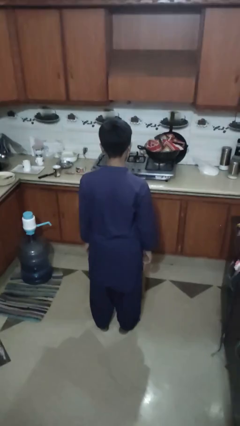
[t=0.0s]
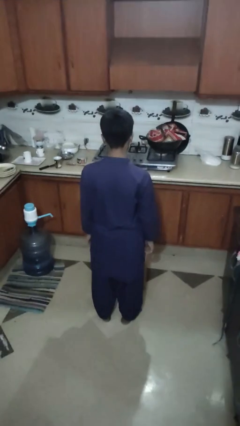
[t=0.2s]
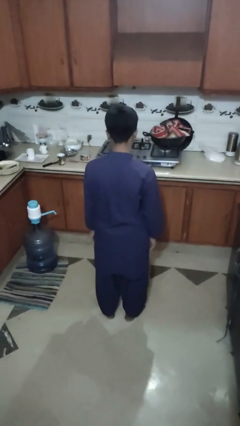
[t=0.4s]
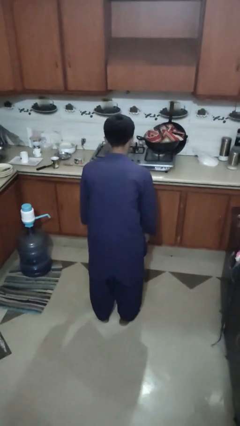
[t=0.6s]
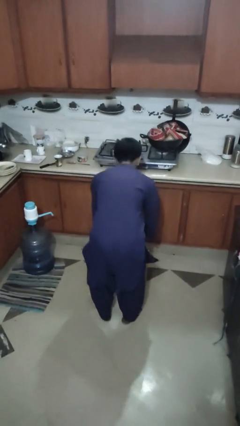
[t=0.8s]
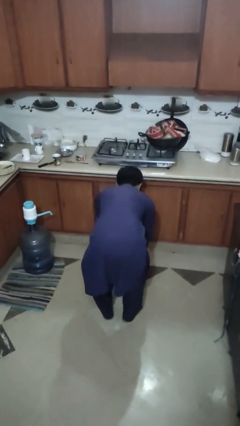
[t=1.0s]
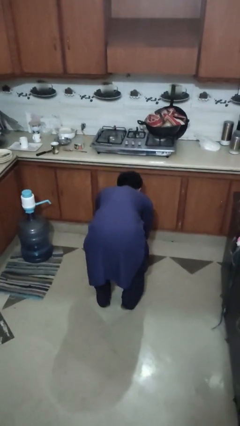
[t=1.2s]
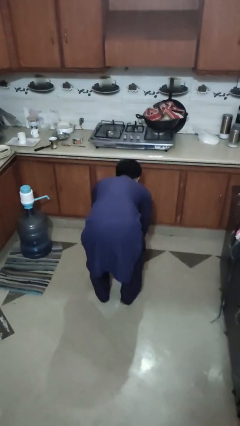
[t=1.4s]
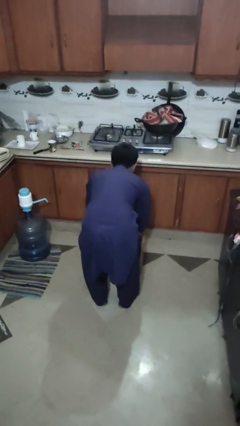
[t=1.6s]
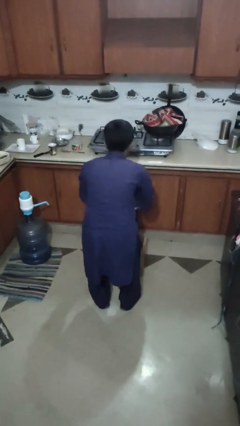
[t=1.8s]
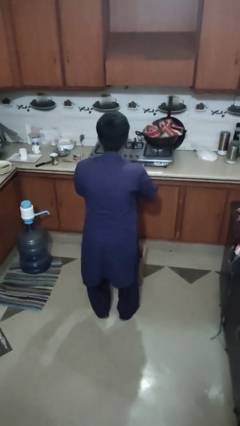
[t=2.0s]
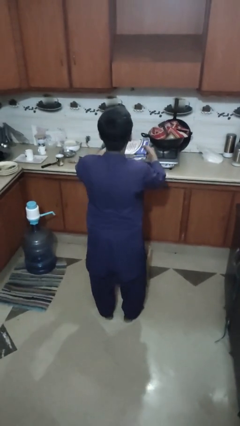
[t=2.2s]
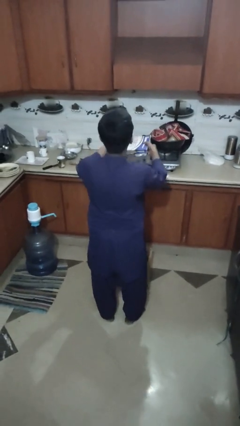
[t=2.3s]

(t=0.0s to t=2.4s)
person takes object from box

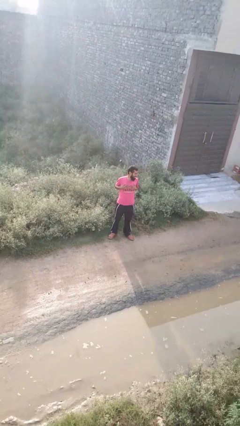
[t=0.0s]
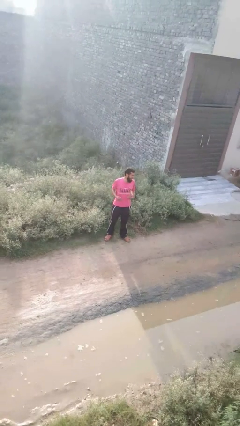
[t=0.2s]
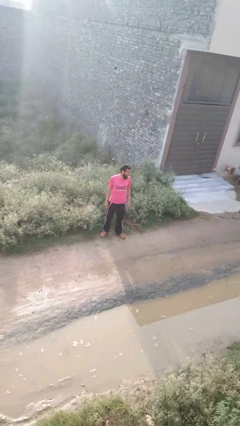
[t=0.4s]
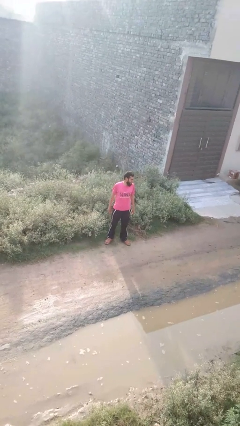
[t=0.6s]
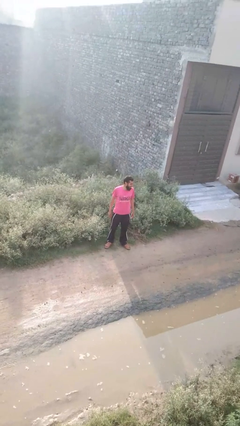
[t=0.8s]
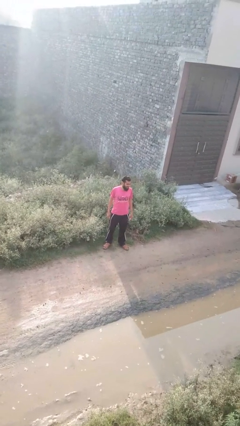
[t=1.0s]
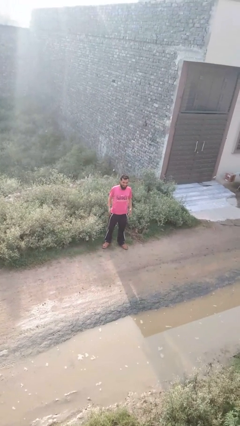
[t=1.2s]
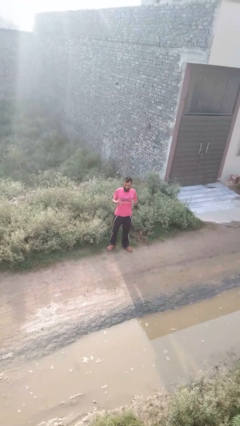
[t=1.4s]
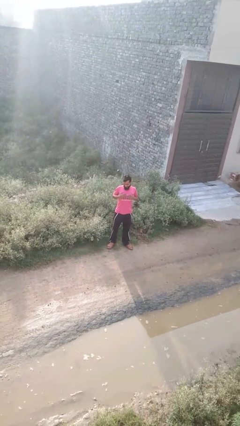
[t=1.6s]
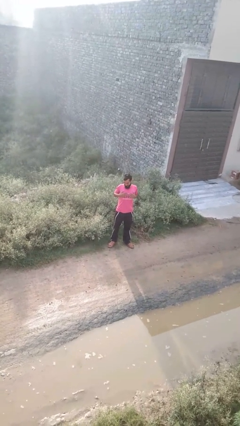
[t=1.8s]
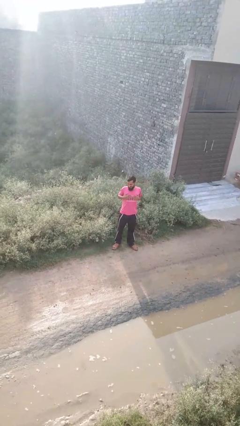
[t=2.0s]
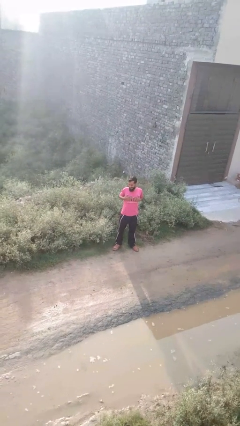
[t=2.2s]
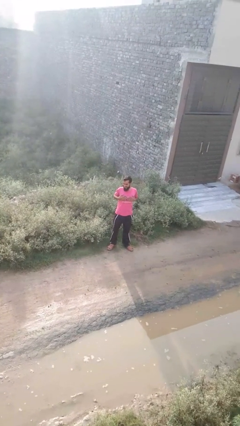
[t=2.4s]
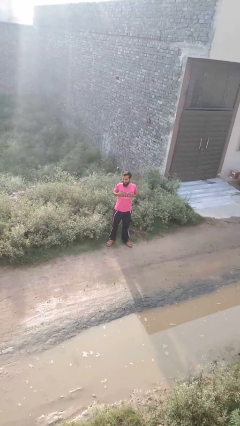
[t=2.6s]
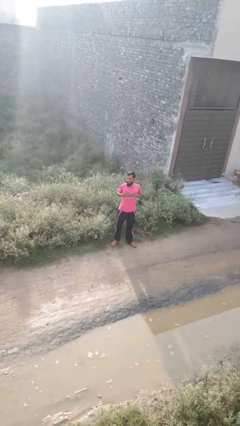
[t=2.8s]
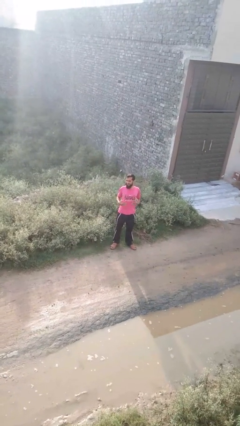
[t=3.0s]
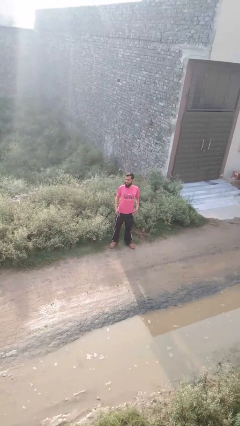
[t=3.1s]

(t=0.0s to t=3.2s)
person drums on chest

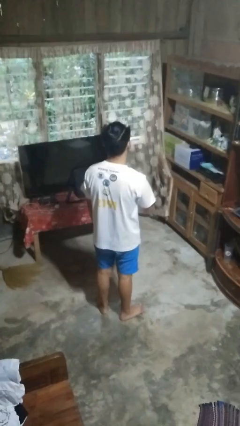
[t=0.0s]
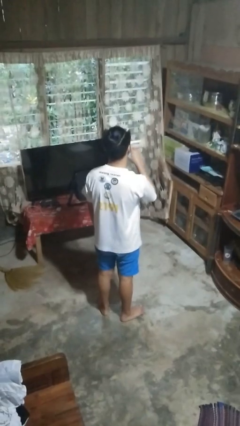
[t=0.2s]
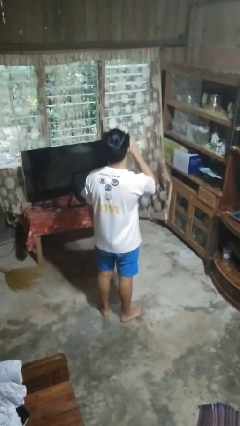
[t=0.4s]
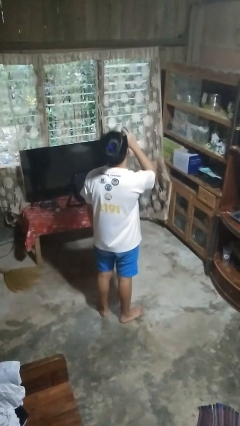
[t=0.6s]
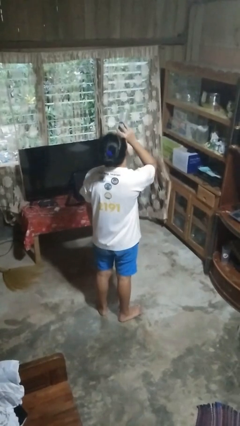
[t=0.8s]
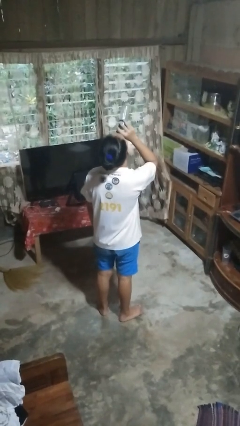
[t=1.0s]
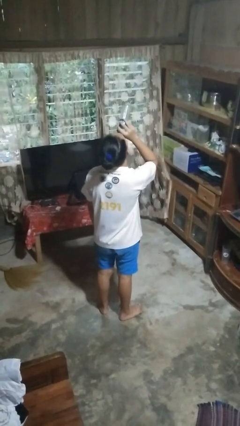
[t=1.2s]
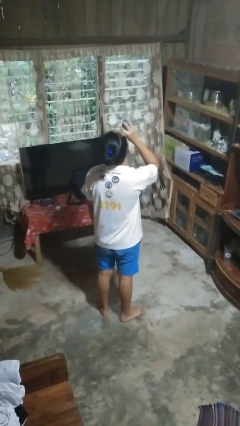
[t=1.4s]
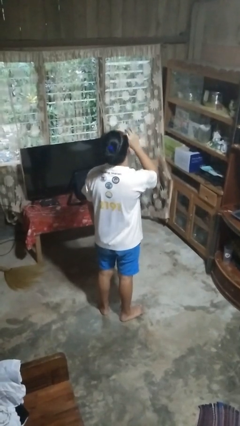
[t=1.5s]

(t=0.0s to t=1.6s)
person drinks from bottle

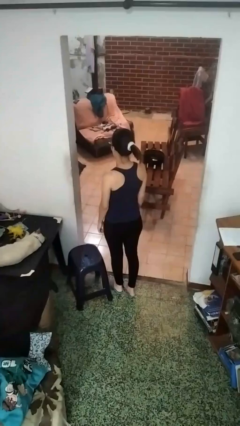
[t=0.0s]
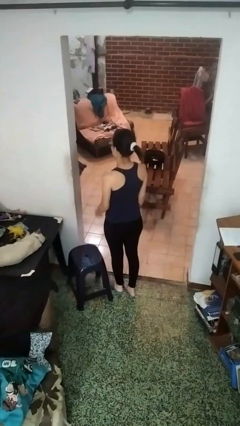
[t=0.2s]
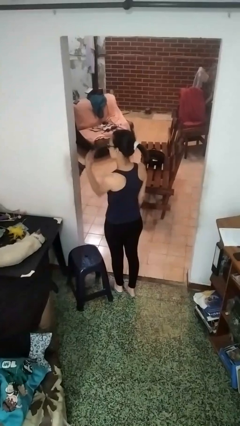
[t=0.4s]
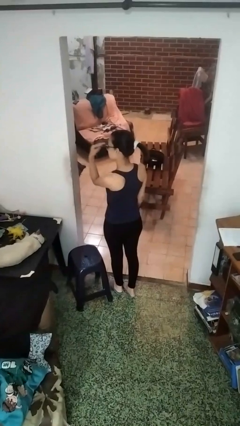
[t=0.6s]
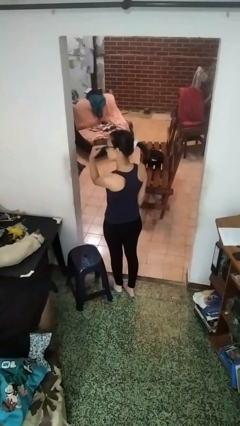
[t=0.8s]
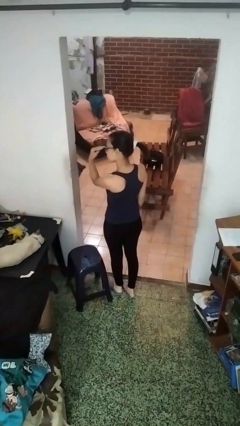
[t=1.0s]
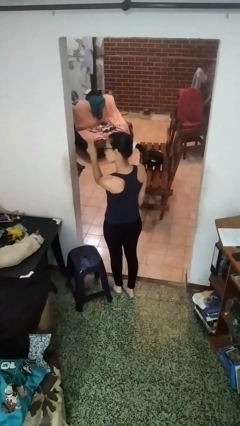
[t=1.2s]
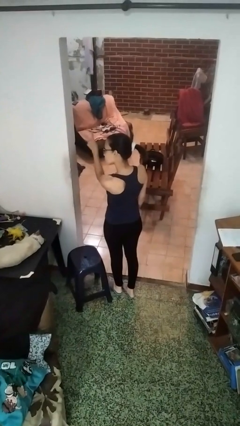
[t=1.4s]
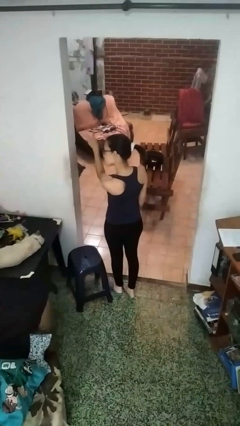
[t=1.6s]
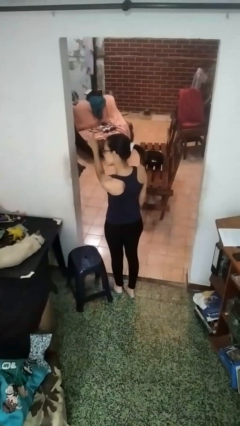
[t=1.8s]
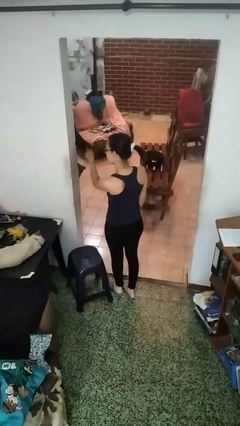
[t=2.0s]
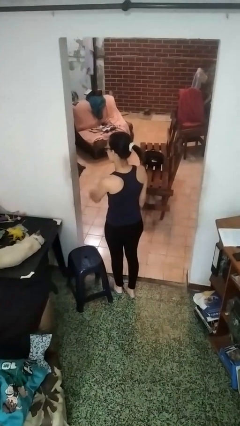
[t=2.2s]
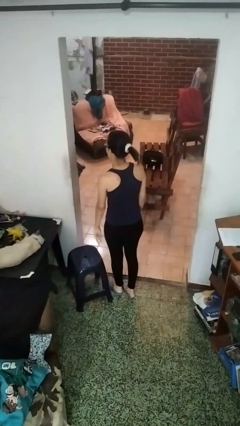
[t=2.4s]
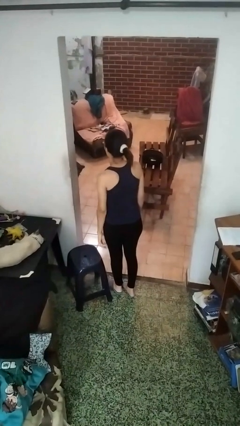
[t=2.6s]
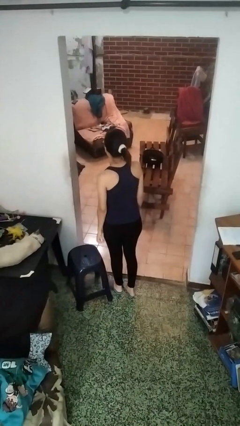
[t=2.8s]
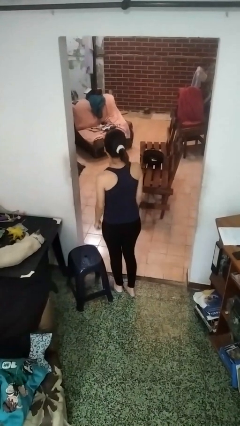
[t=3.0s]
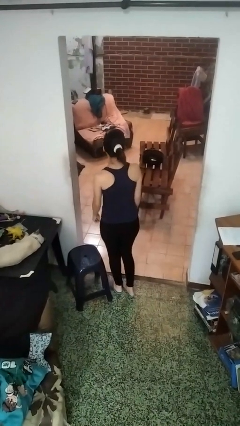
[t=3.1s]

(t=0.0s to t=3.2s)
person gestures watch closely

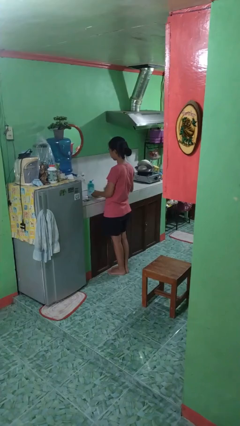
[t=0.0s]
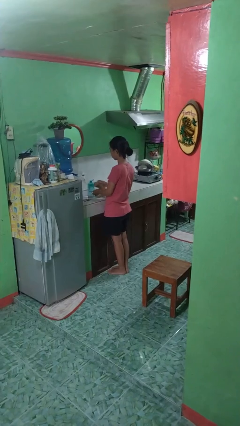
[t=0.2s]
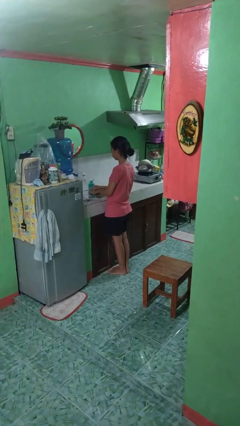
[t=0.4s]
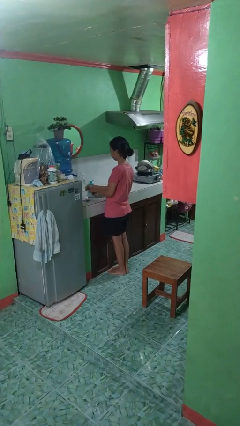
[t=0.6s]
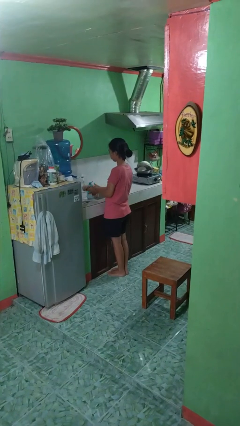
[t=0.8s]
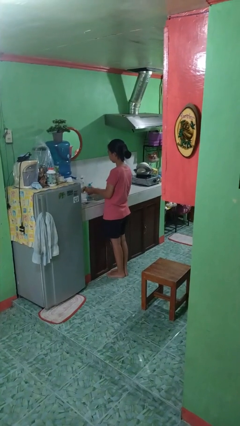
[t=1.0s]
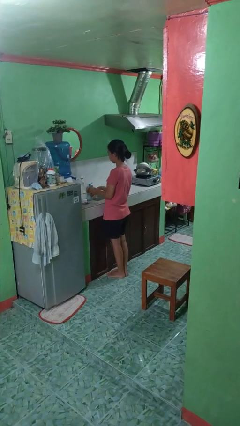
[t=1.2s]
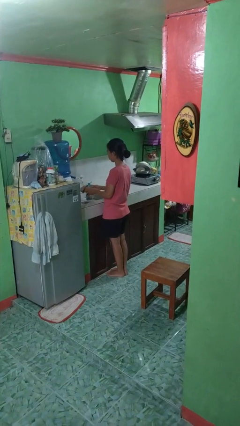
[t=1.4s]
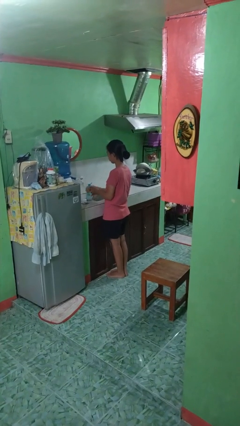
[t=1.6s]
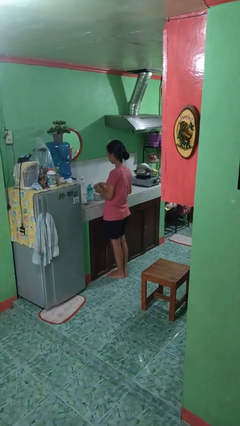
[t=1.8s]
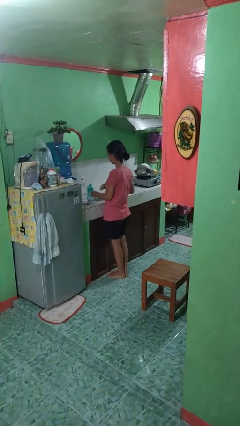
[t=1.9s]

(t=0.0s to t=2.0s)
person dries hands with towel

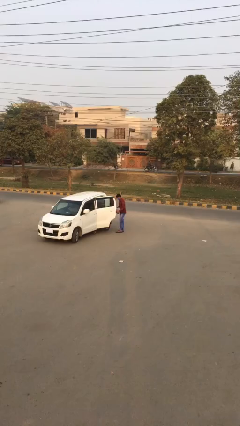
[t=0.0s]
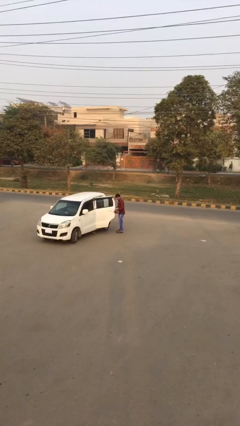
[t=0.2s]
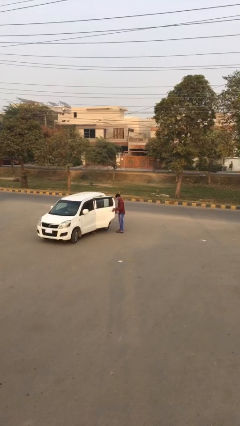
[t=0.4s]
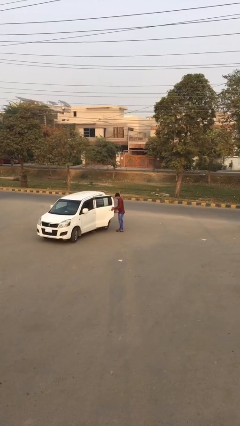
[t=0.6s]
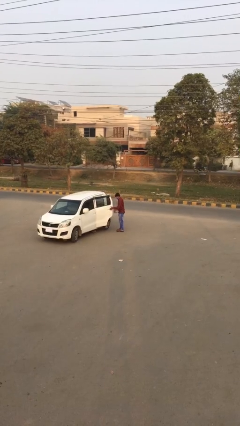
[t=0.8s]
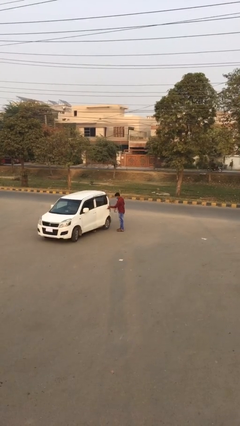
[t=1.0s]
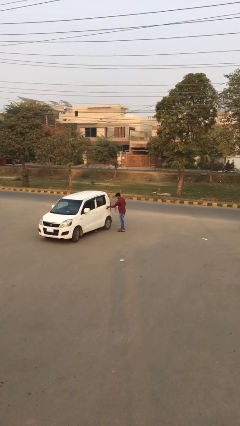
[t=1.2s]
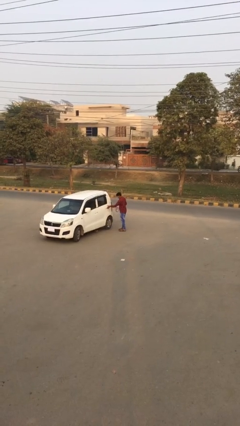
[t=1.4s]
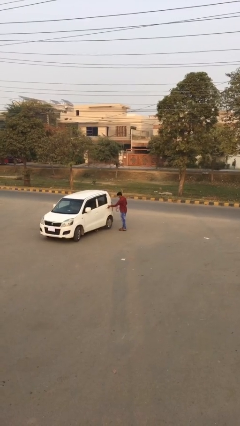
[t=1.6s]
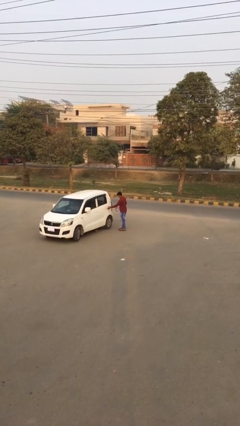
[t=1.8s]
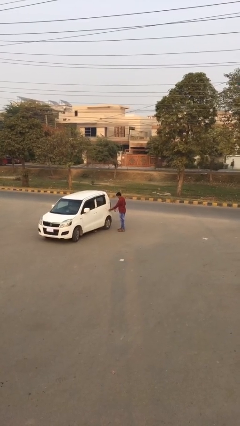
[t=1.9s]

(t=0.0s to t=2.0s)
person closes car door

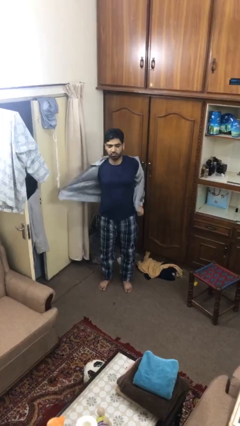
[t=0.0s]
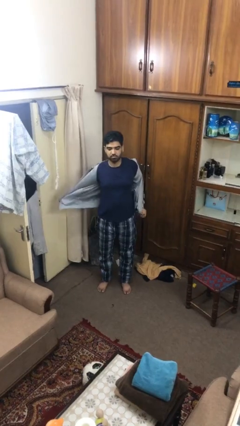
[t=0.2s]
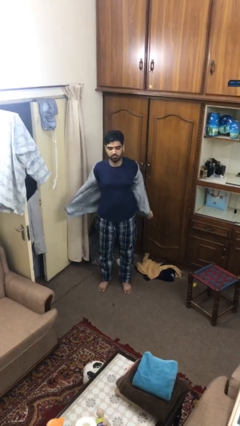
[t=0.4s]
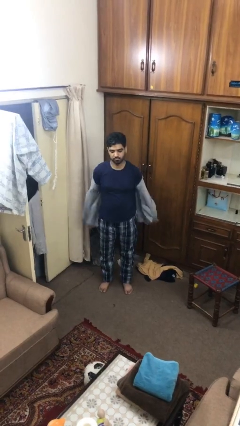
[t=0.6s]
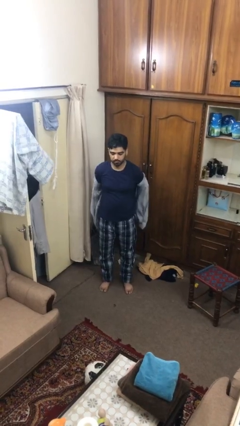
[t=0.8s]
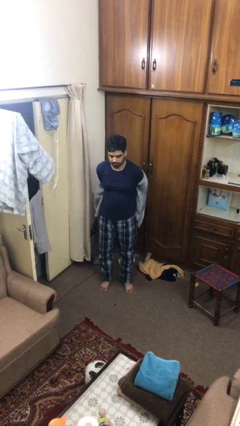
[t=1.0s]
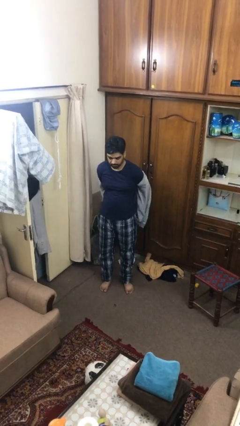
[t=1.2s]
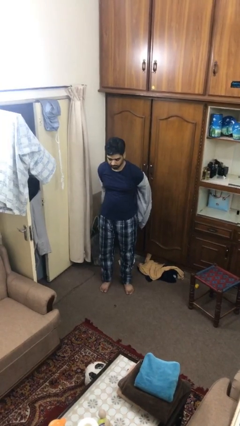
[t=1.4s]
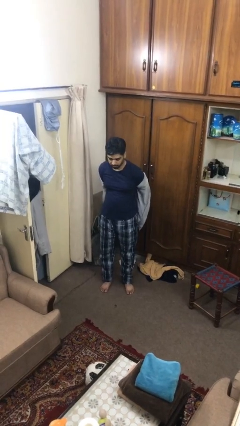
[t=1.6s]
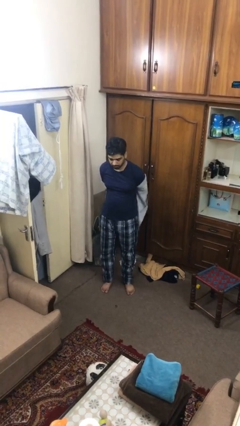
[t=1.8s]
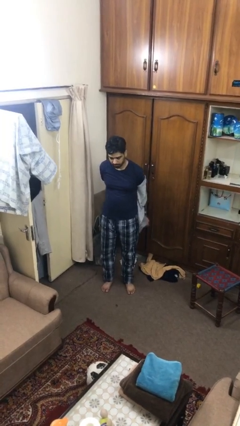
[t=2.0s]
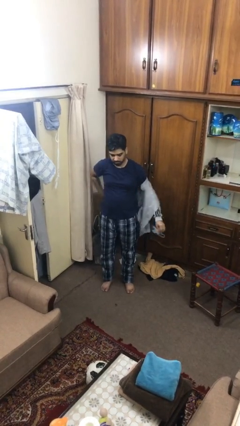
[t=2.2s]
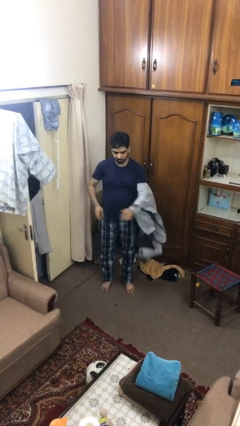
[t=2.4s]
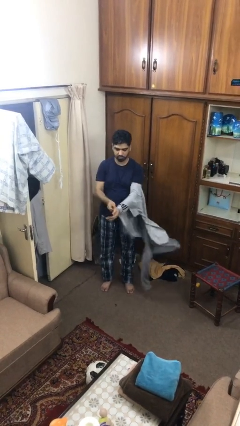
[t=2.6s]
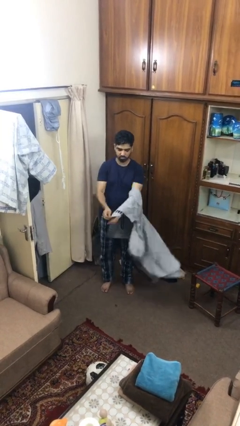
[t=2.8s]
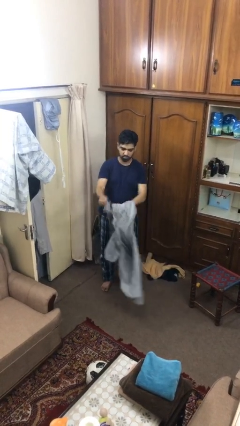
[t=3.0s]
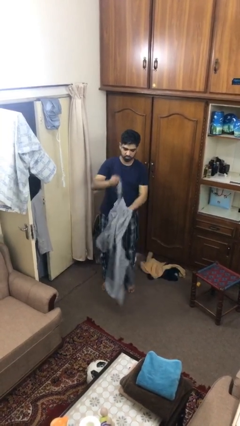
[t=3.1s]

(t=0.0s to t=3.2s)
person takes off jacket
